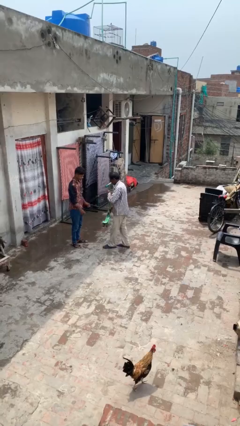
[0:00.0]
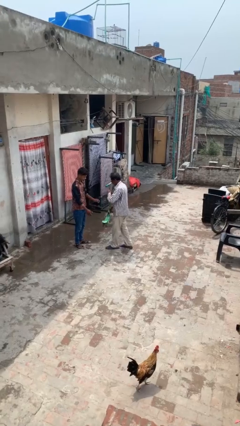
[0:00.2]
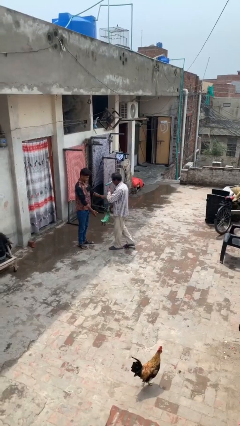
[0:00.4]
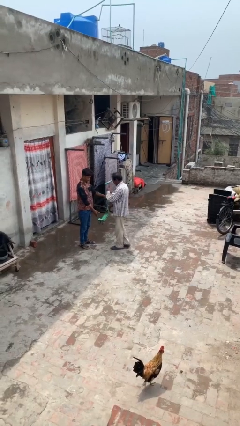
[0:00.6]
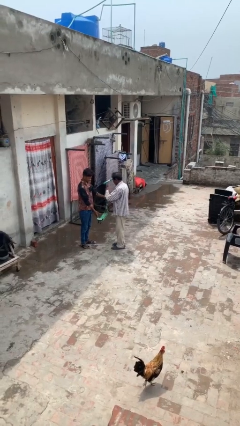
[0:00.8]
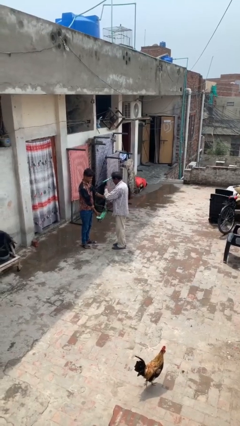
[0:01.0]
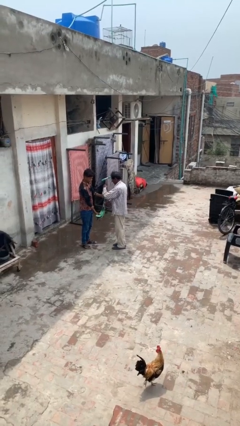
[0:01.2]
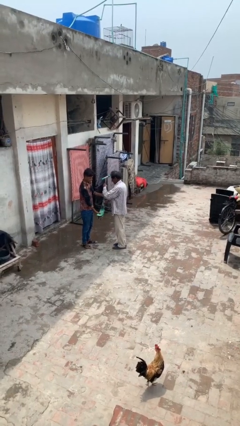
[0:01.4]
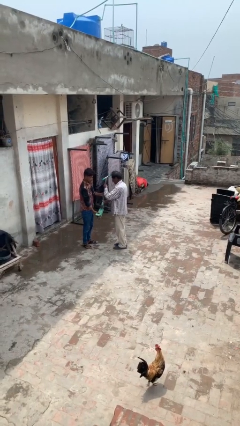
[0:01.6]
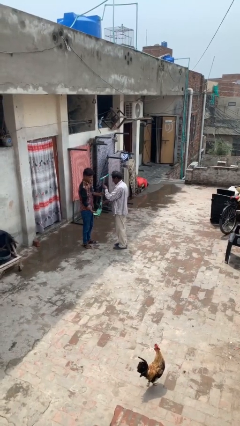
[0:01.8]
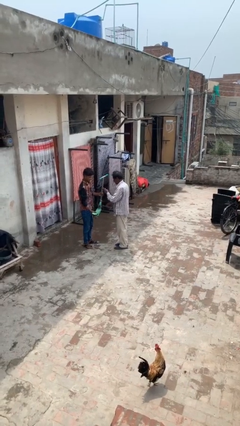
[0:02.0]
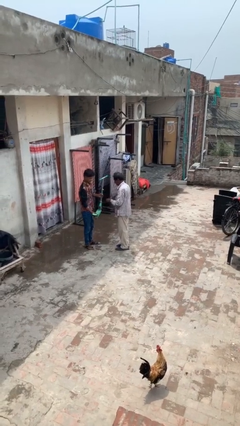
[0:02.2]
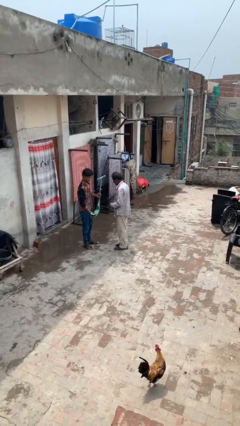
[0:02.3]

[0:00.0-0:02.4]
person transfers object to person

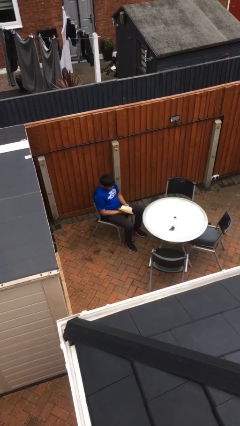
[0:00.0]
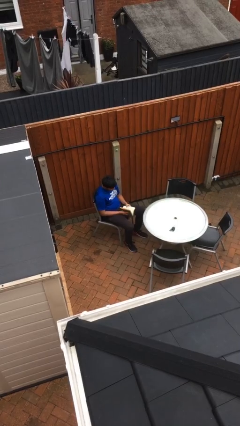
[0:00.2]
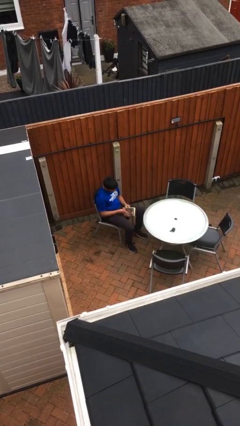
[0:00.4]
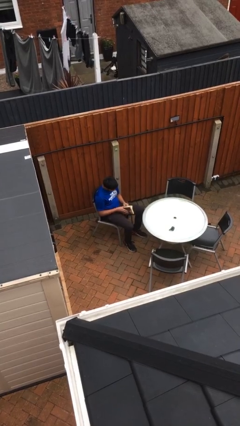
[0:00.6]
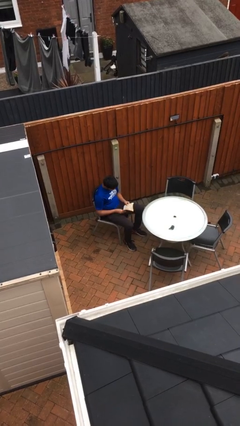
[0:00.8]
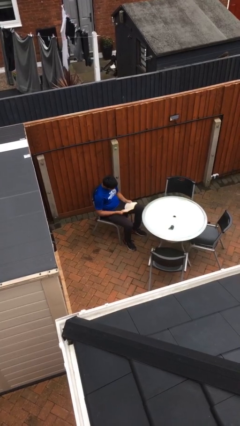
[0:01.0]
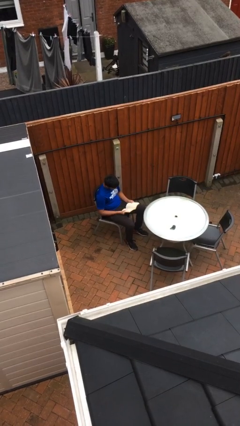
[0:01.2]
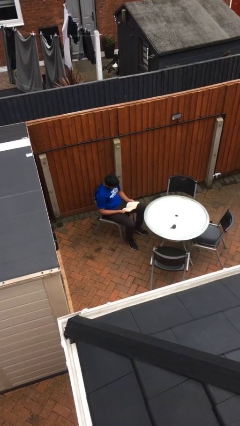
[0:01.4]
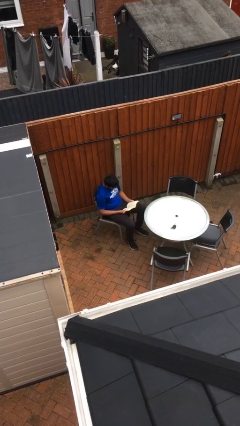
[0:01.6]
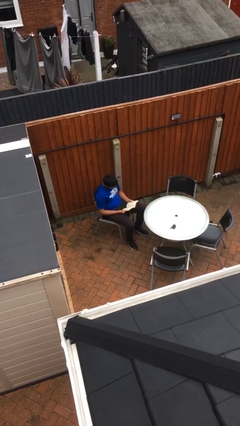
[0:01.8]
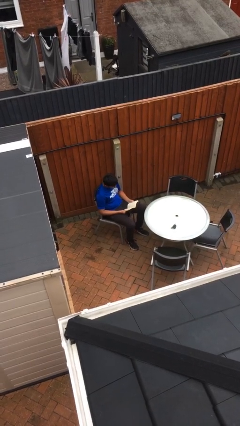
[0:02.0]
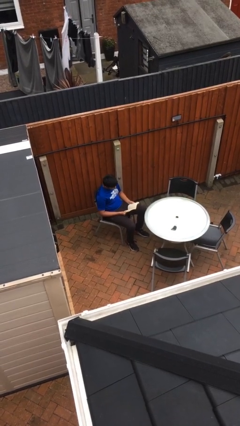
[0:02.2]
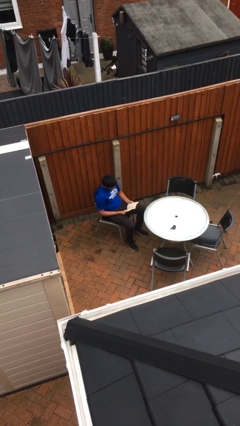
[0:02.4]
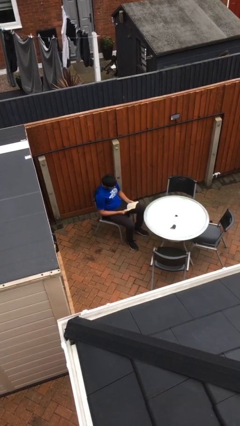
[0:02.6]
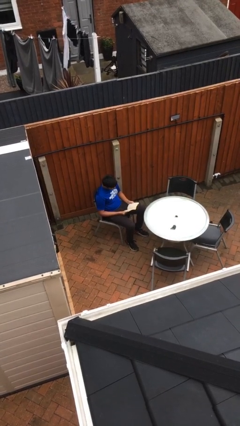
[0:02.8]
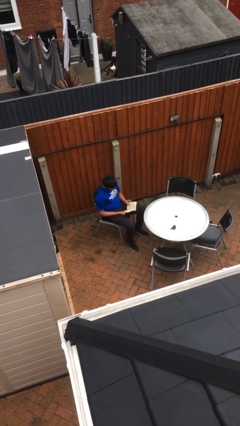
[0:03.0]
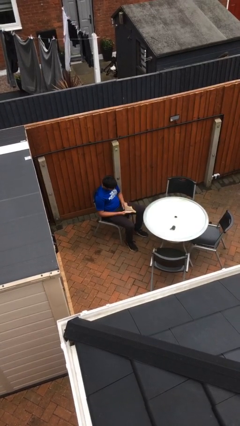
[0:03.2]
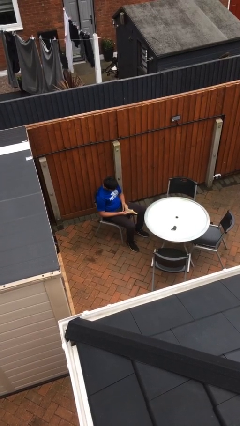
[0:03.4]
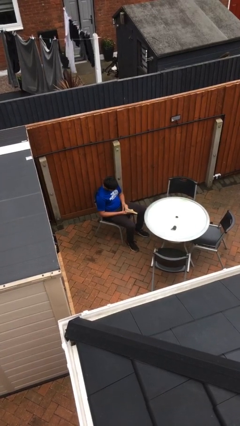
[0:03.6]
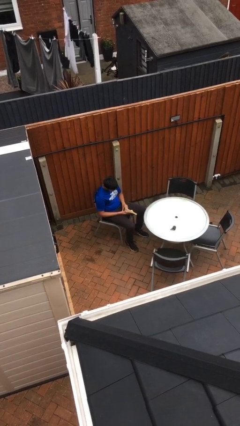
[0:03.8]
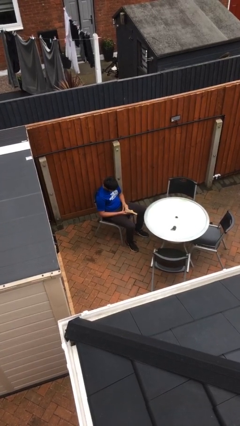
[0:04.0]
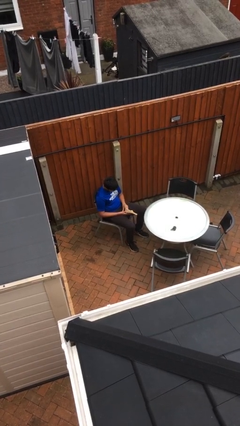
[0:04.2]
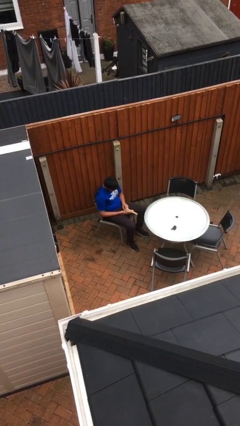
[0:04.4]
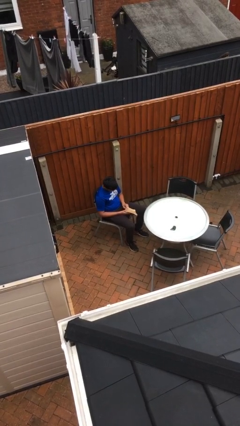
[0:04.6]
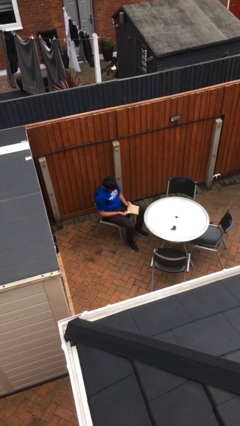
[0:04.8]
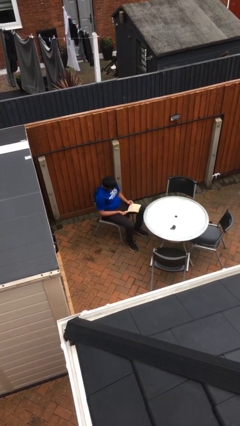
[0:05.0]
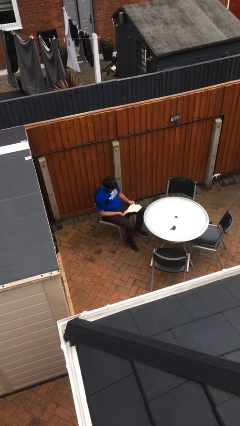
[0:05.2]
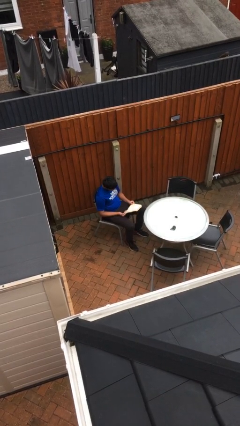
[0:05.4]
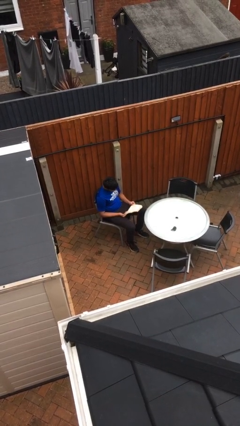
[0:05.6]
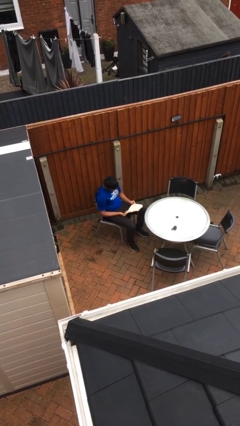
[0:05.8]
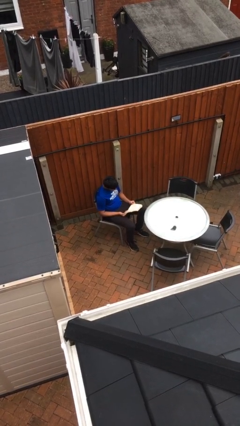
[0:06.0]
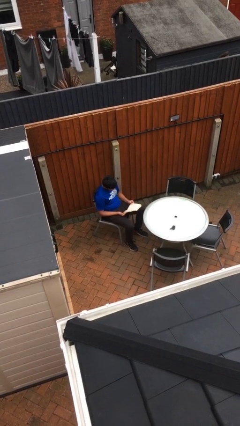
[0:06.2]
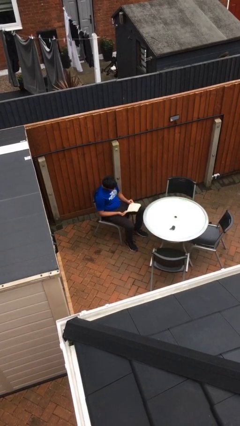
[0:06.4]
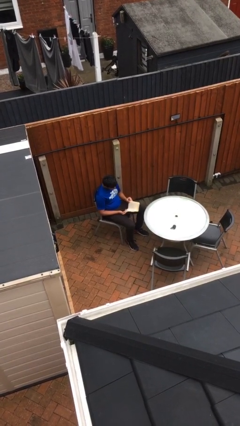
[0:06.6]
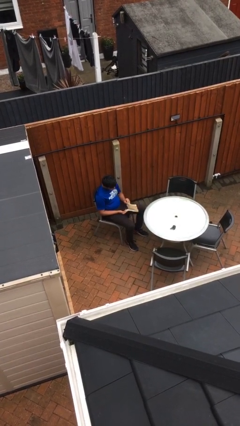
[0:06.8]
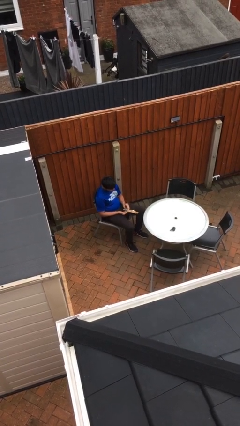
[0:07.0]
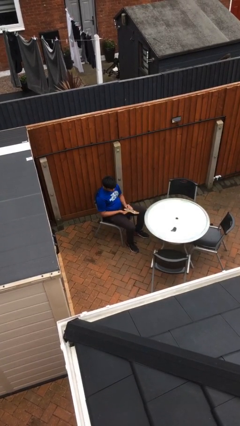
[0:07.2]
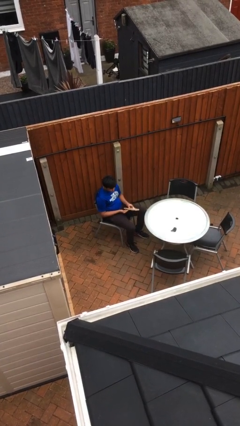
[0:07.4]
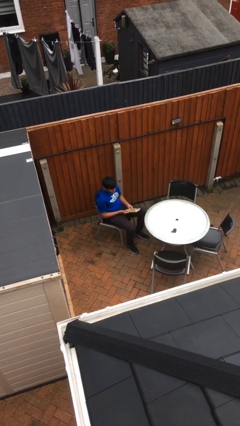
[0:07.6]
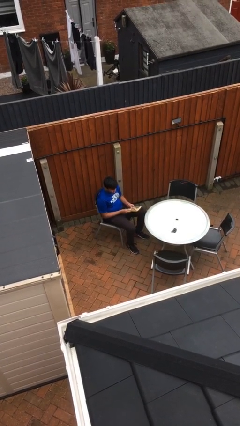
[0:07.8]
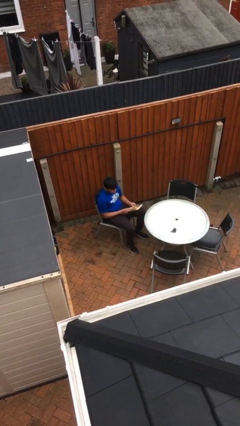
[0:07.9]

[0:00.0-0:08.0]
person reads document

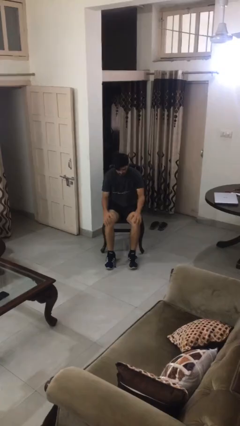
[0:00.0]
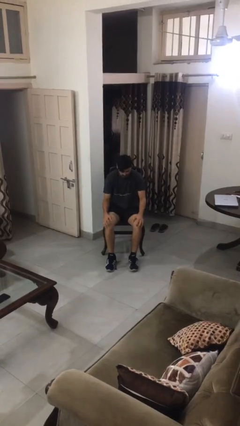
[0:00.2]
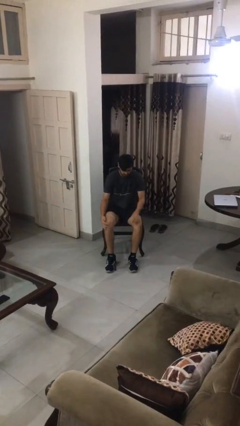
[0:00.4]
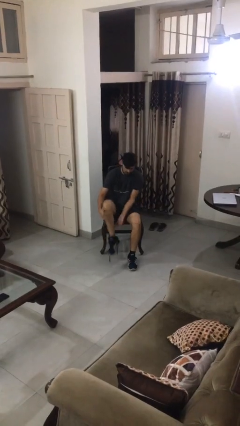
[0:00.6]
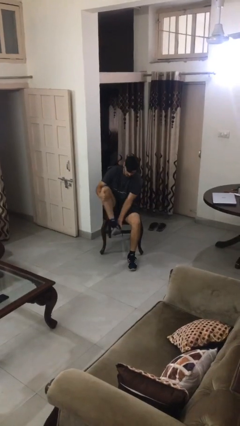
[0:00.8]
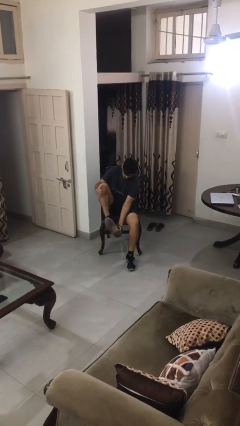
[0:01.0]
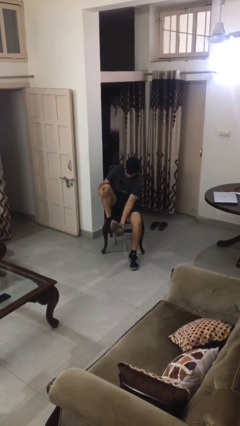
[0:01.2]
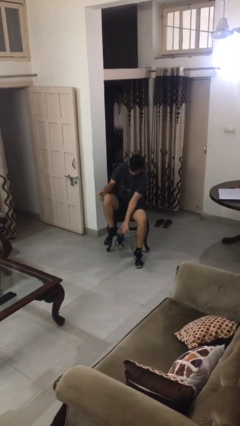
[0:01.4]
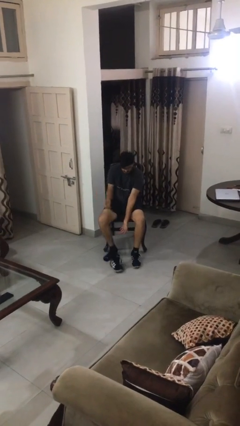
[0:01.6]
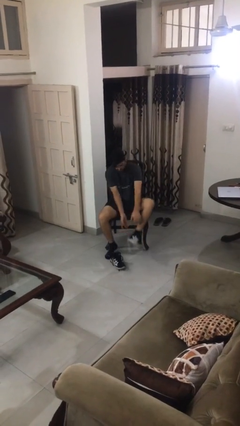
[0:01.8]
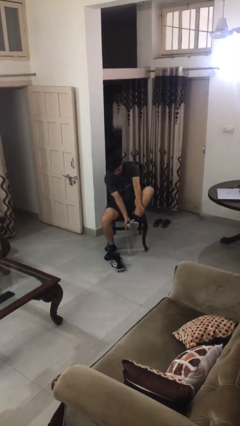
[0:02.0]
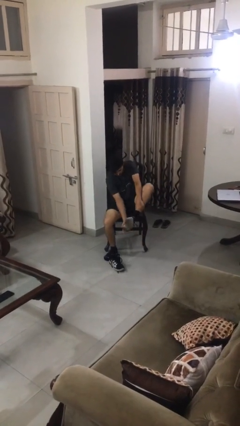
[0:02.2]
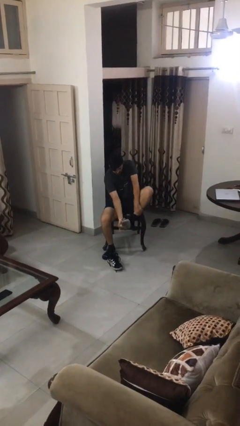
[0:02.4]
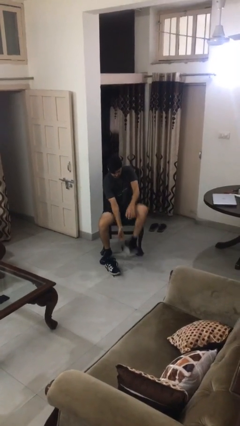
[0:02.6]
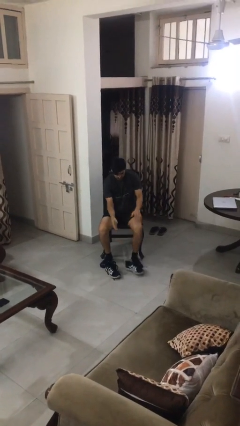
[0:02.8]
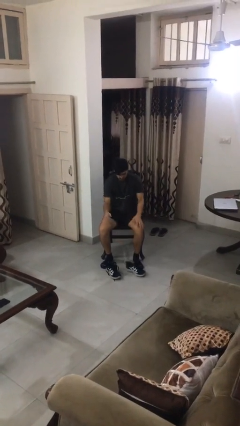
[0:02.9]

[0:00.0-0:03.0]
person takes off shoes

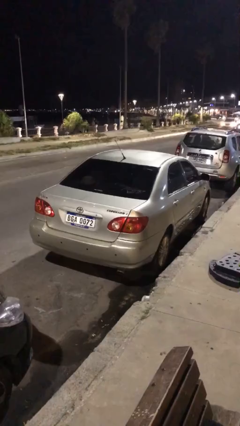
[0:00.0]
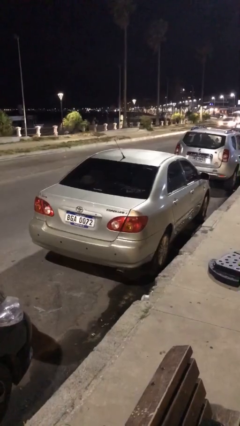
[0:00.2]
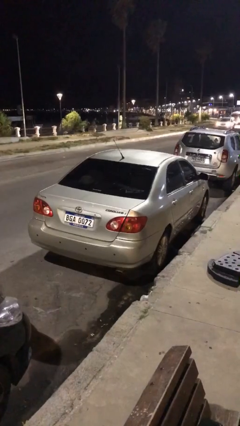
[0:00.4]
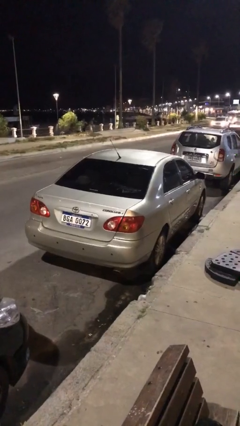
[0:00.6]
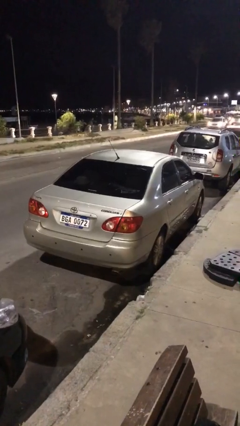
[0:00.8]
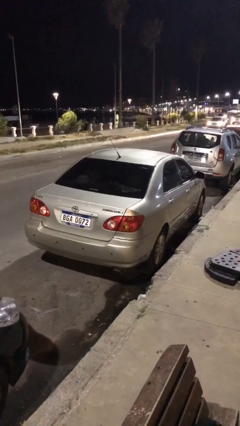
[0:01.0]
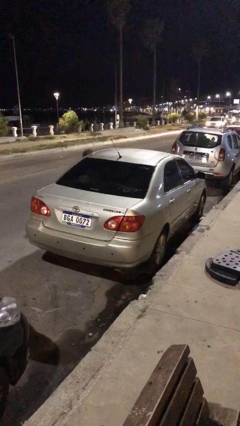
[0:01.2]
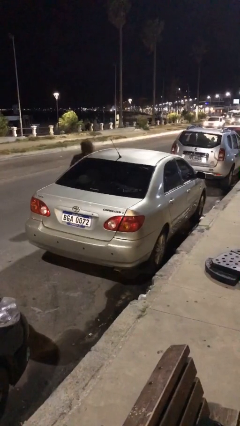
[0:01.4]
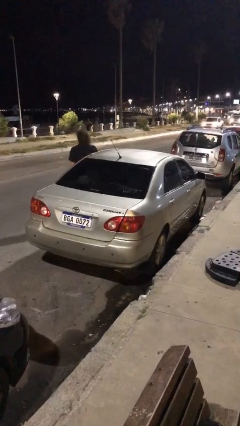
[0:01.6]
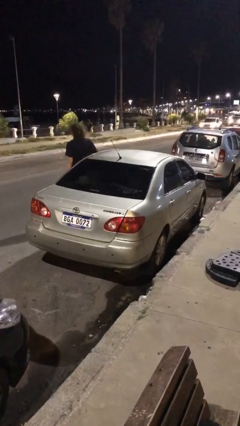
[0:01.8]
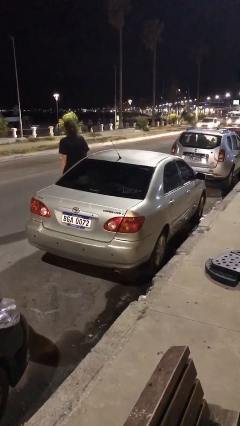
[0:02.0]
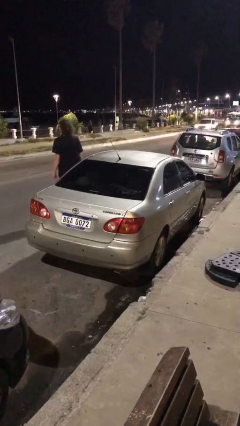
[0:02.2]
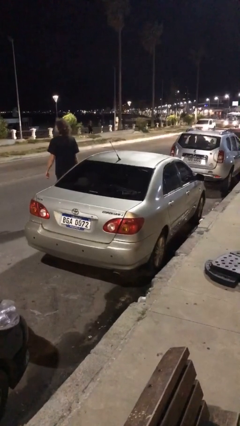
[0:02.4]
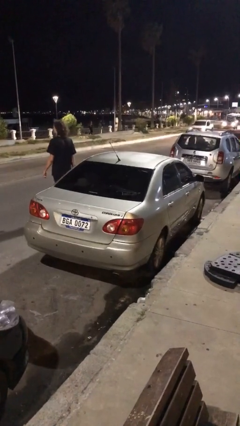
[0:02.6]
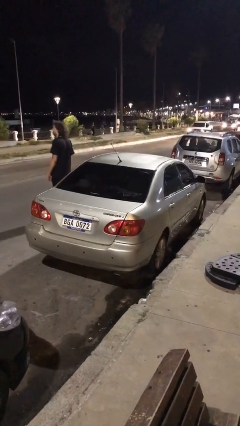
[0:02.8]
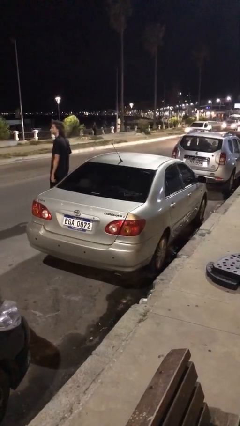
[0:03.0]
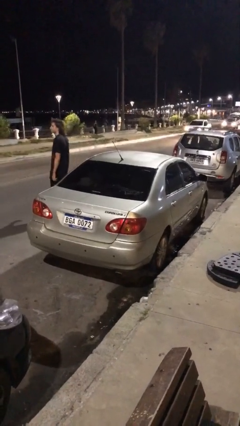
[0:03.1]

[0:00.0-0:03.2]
car drops off person

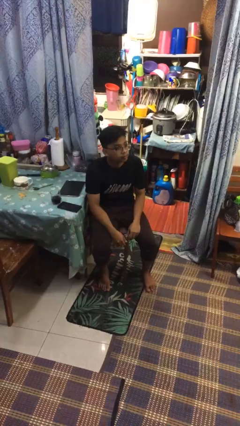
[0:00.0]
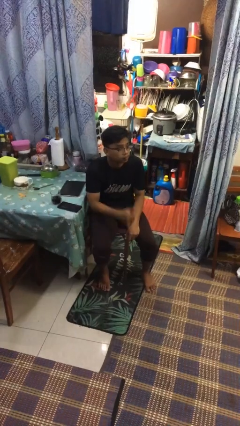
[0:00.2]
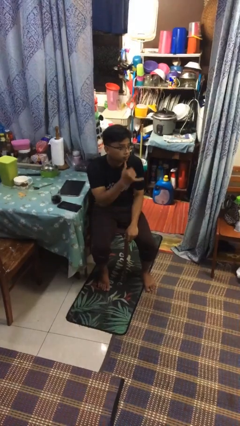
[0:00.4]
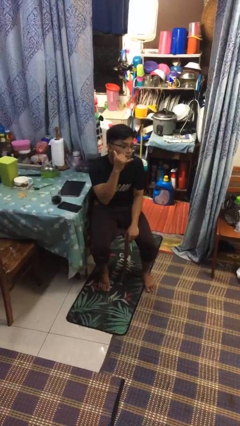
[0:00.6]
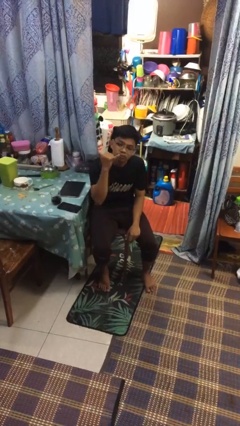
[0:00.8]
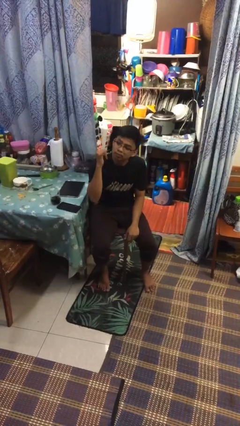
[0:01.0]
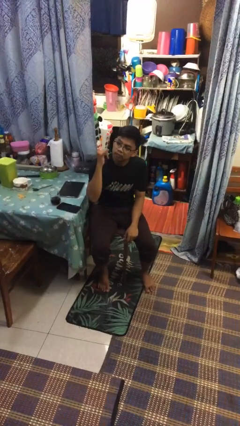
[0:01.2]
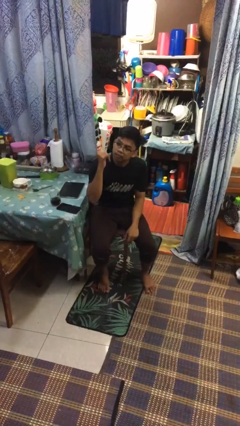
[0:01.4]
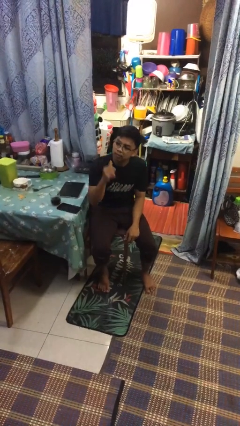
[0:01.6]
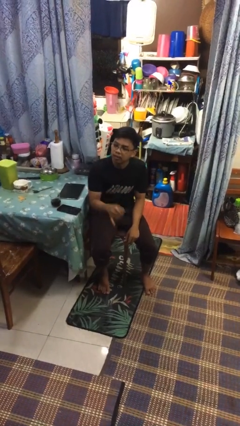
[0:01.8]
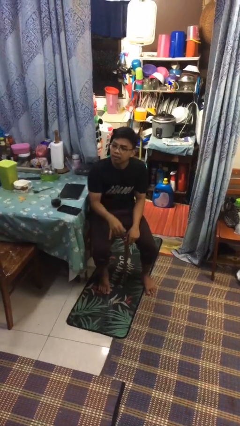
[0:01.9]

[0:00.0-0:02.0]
person gestures hang loose
